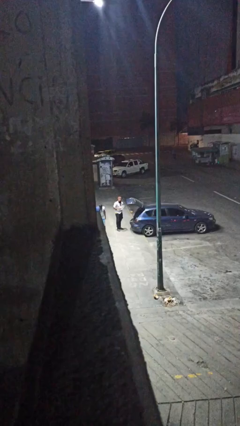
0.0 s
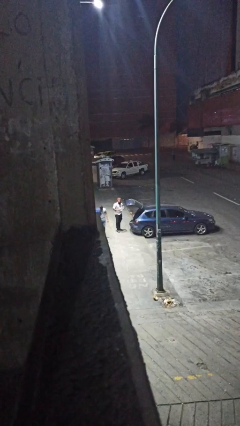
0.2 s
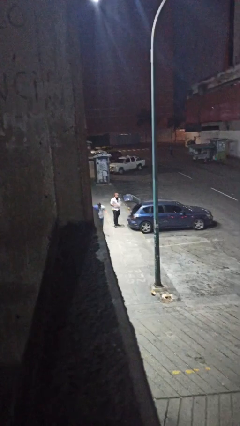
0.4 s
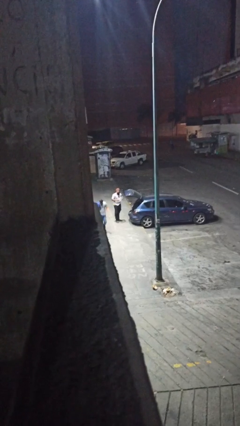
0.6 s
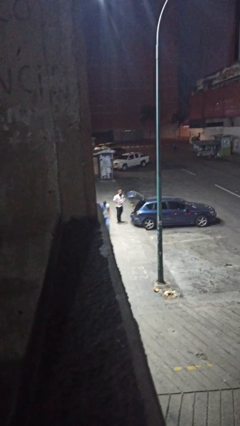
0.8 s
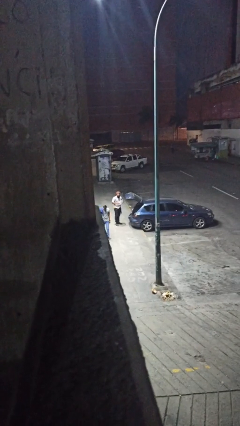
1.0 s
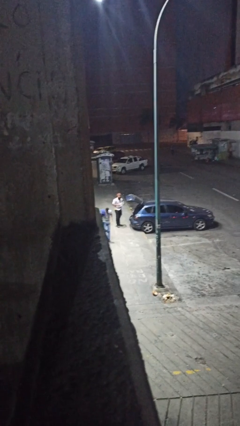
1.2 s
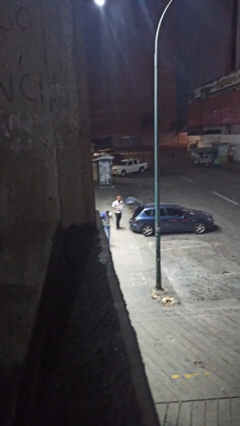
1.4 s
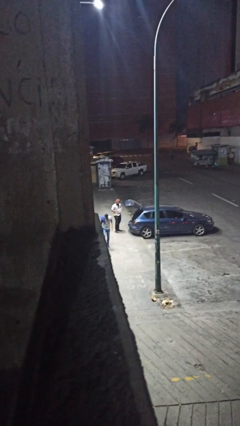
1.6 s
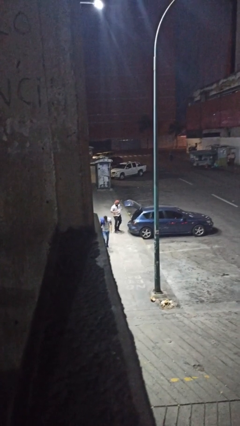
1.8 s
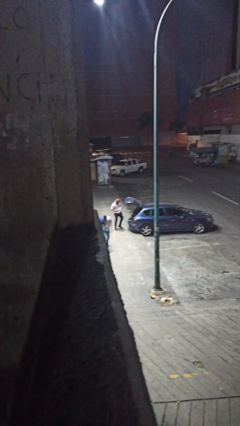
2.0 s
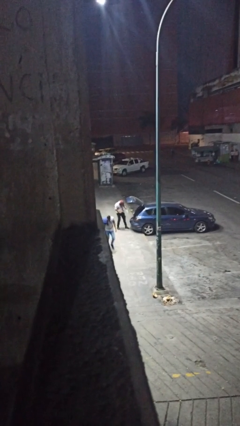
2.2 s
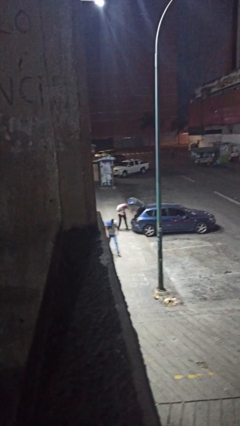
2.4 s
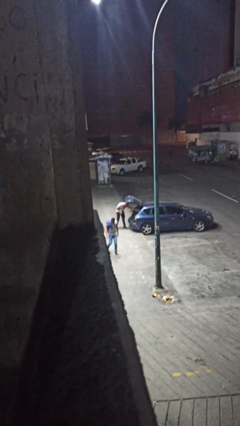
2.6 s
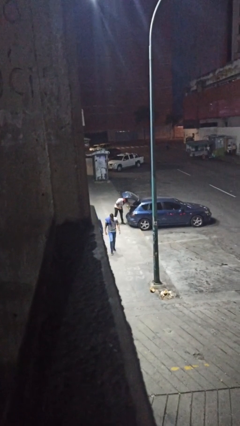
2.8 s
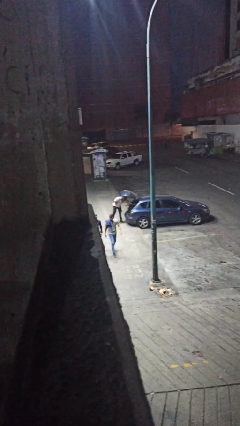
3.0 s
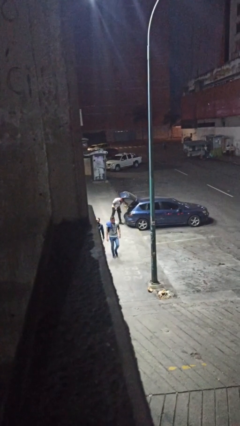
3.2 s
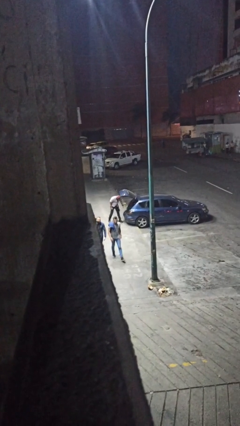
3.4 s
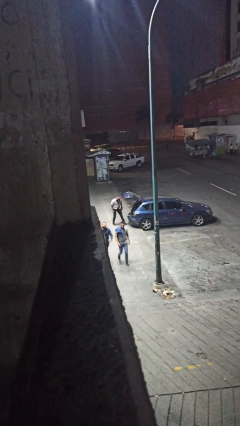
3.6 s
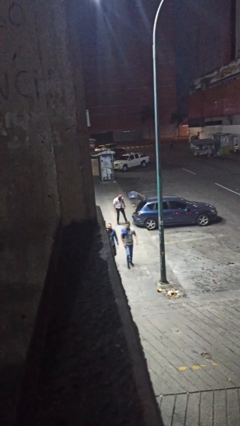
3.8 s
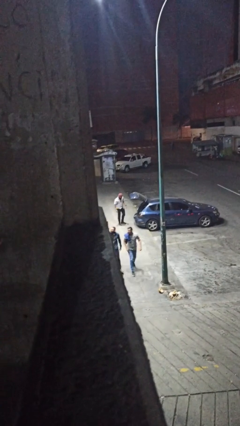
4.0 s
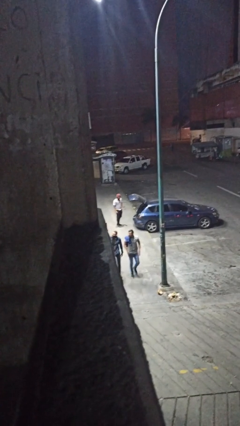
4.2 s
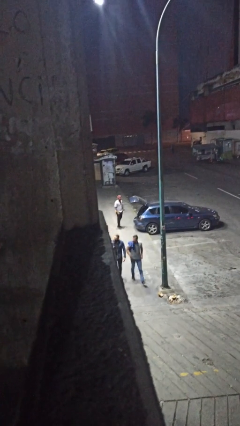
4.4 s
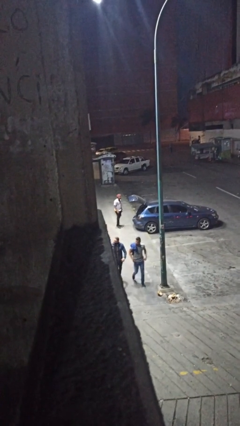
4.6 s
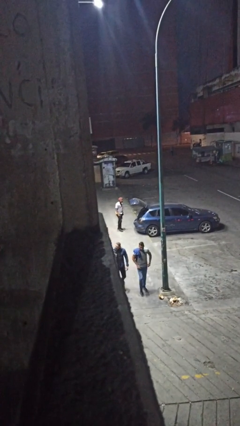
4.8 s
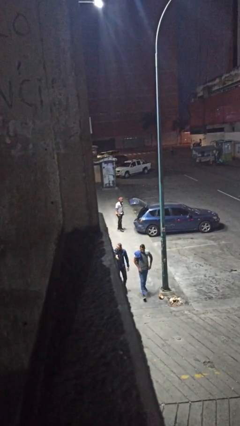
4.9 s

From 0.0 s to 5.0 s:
person loads car

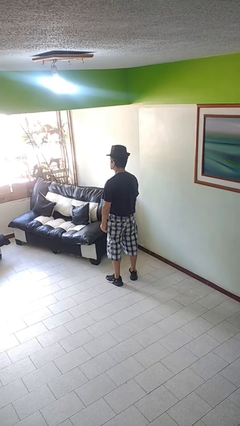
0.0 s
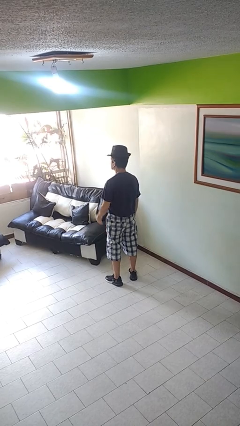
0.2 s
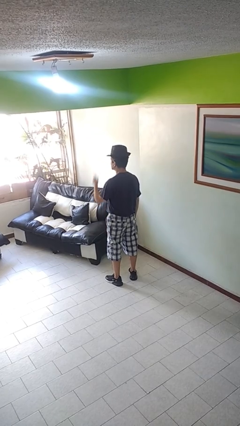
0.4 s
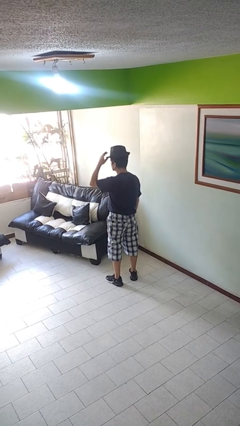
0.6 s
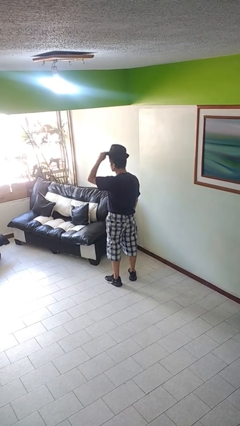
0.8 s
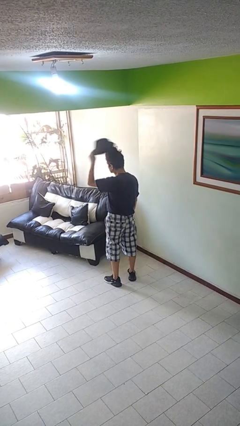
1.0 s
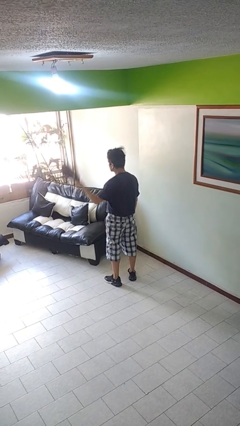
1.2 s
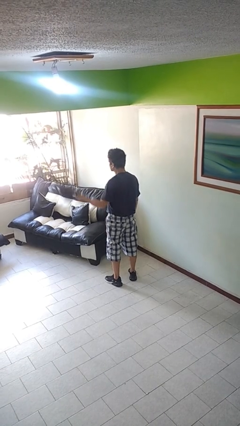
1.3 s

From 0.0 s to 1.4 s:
person takes off hat

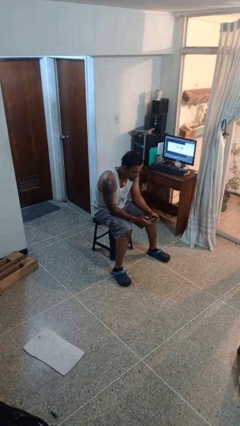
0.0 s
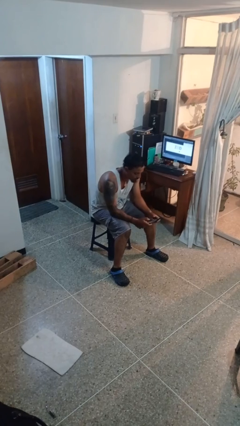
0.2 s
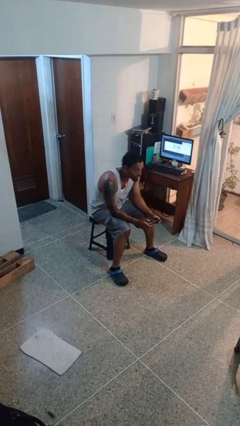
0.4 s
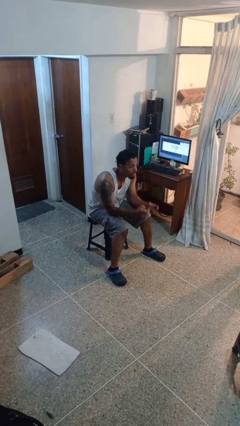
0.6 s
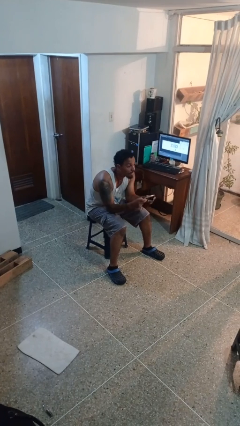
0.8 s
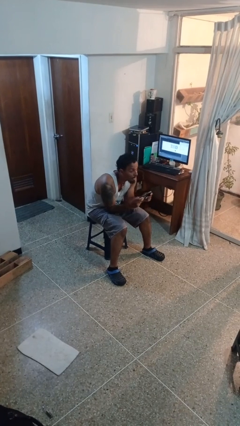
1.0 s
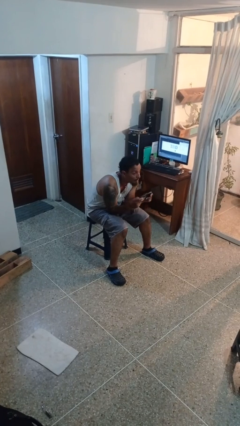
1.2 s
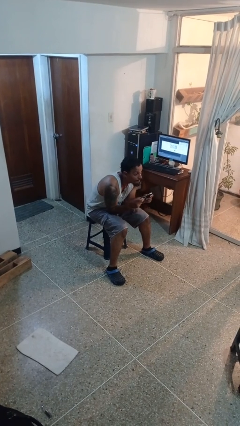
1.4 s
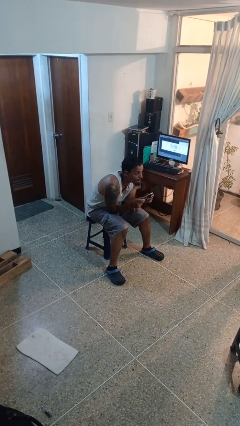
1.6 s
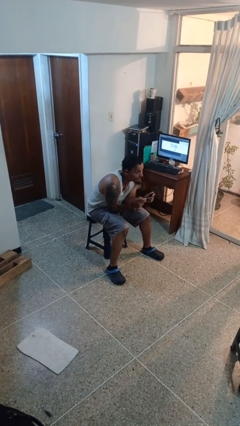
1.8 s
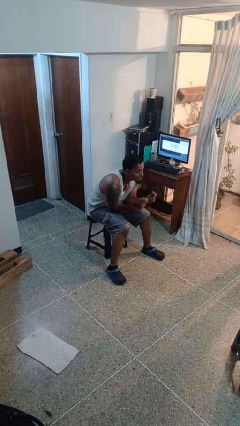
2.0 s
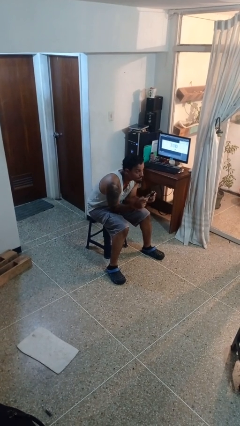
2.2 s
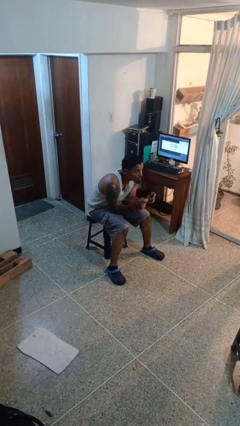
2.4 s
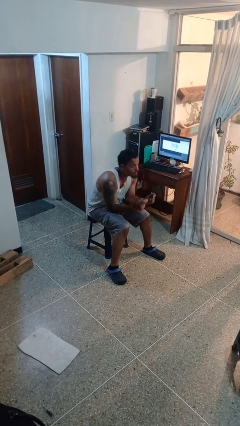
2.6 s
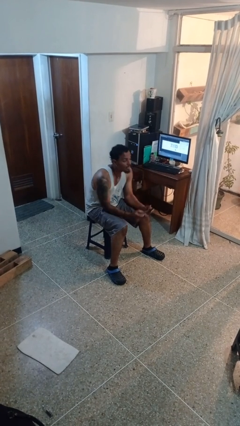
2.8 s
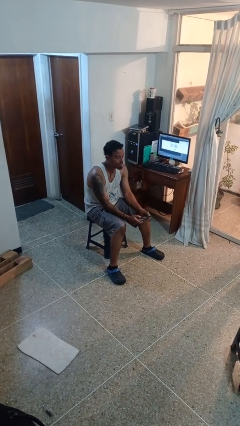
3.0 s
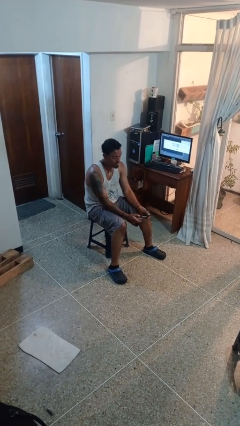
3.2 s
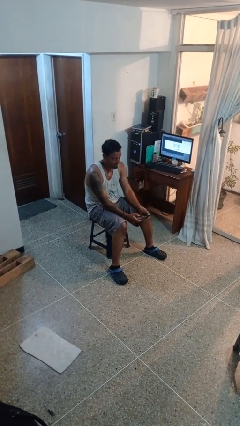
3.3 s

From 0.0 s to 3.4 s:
person interacts with handheld game

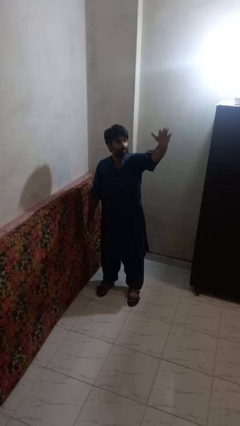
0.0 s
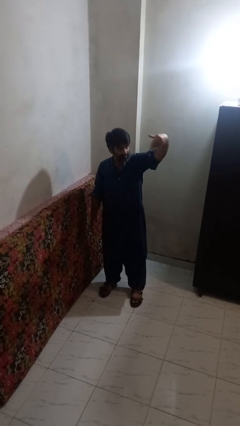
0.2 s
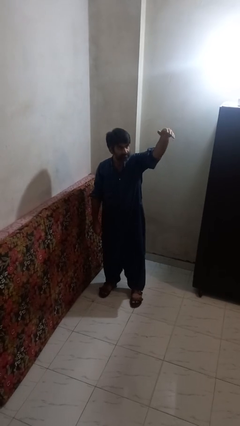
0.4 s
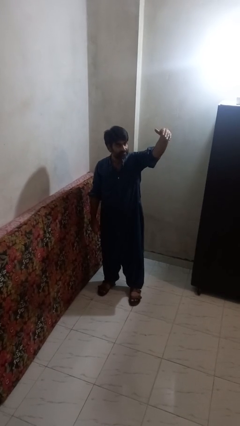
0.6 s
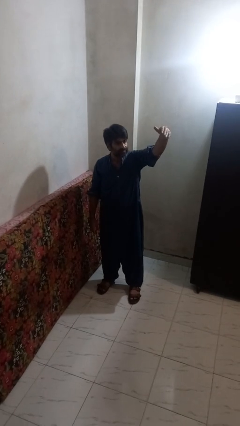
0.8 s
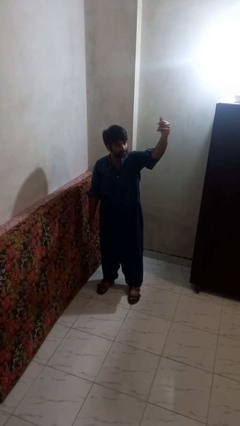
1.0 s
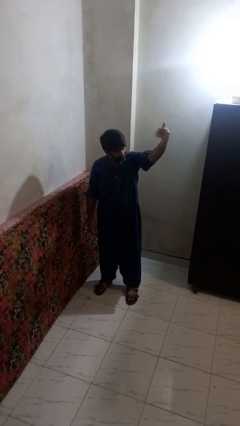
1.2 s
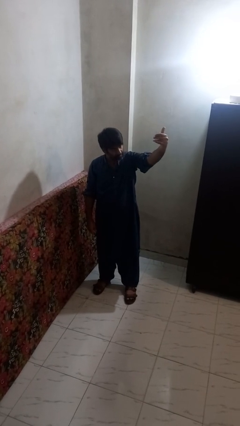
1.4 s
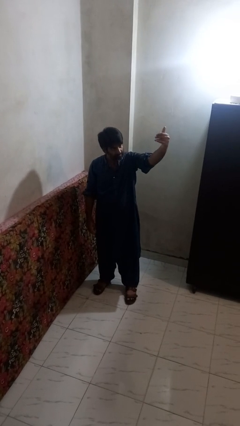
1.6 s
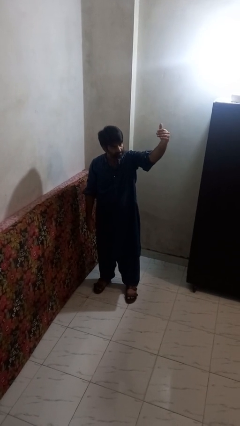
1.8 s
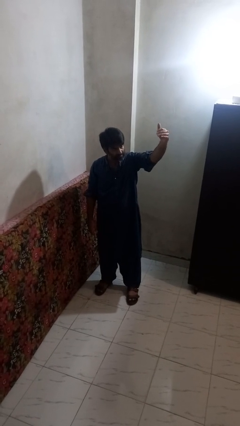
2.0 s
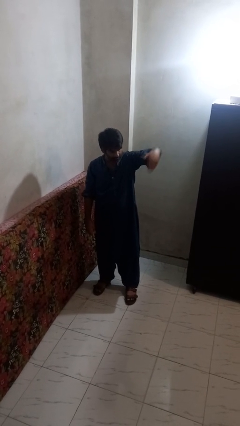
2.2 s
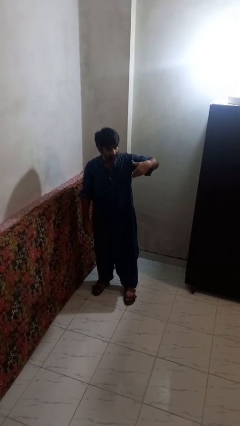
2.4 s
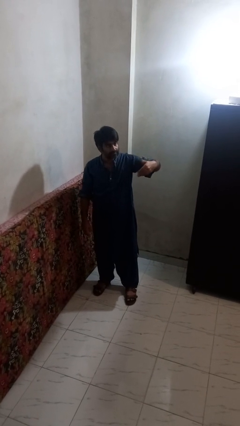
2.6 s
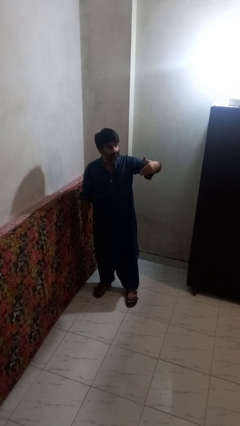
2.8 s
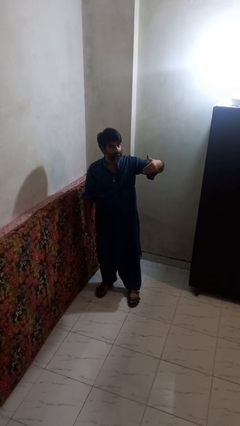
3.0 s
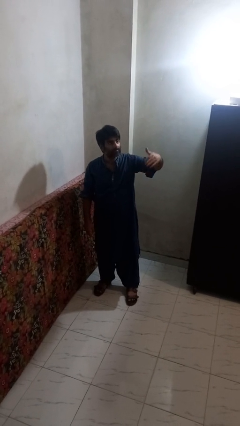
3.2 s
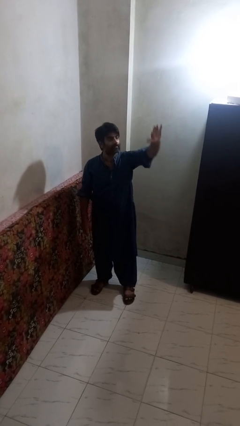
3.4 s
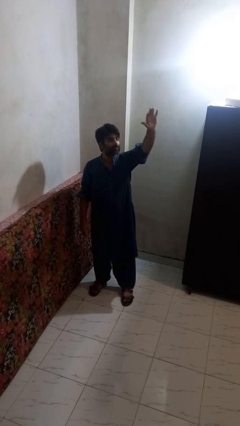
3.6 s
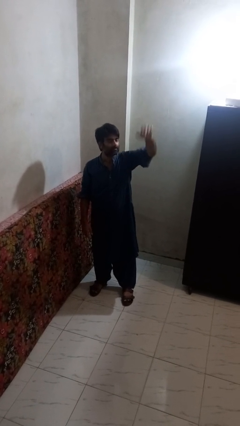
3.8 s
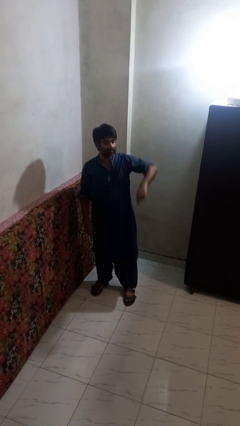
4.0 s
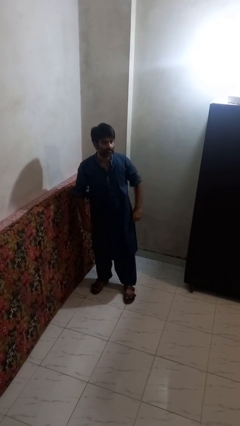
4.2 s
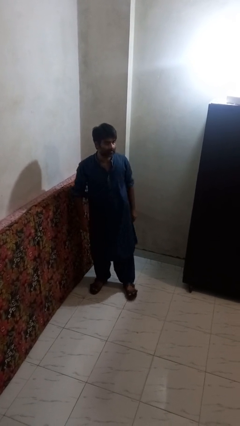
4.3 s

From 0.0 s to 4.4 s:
person gestures come here

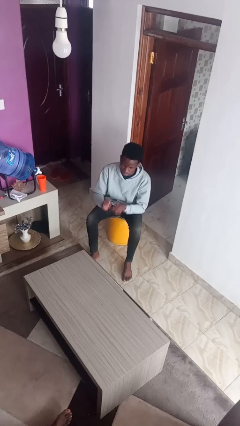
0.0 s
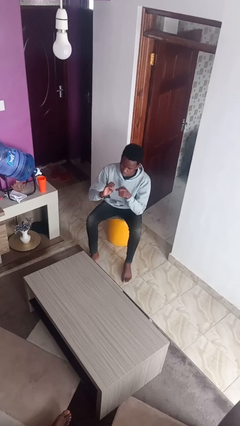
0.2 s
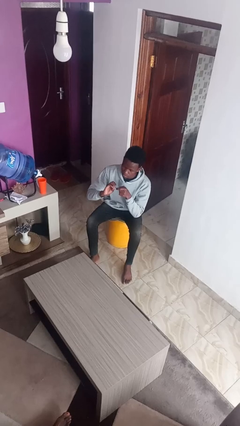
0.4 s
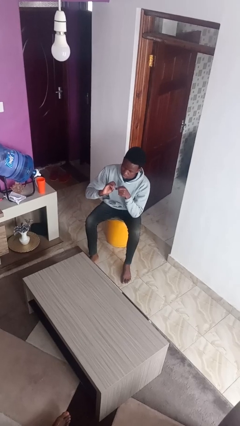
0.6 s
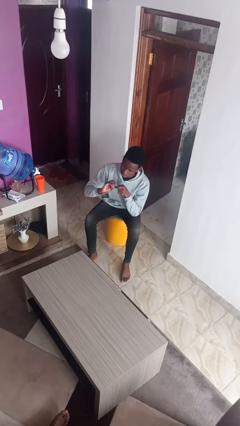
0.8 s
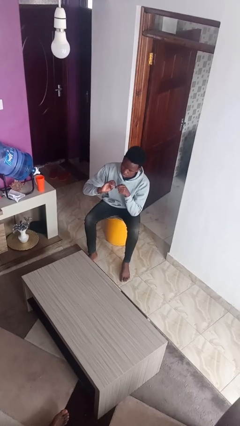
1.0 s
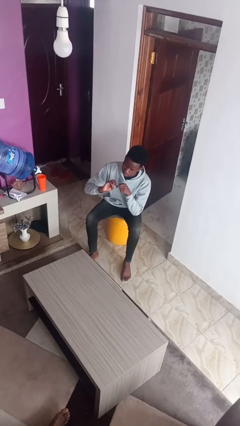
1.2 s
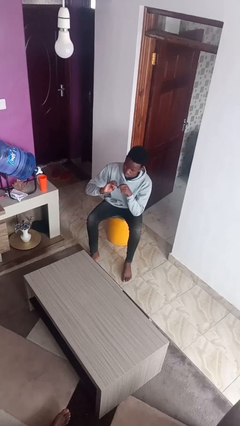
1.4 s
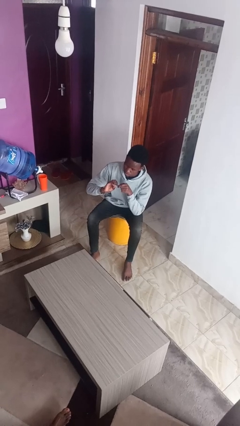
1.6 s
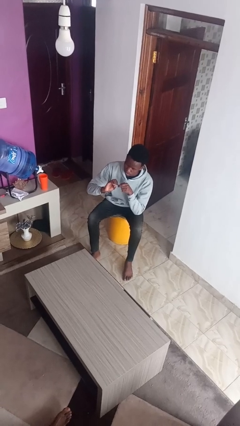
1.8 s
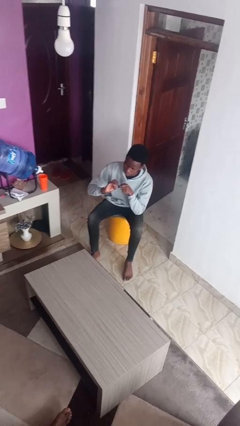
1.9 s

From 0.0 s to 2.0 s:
person files fingernails

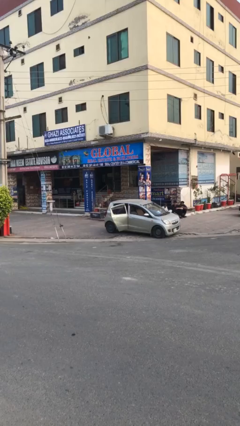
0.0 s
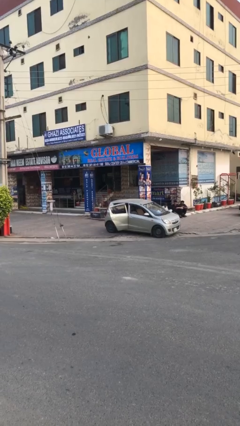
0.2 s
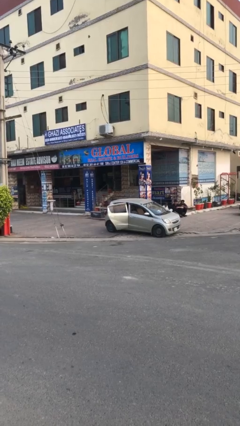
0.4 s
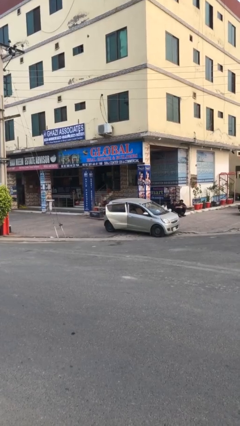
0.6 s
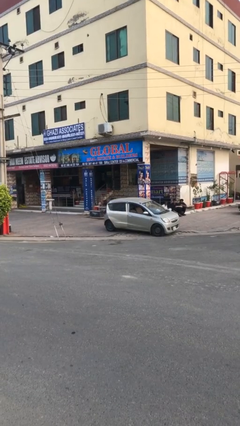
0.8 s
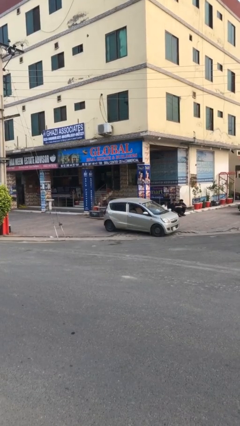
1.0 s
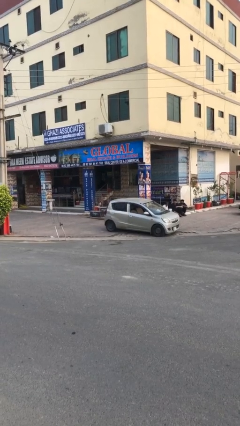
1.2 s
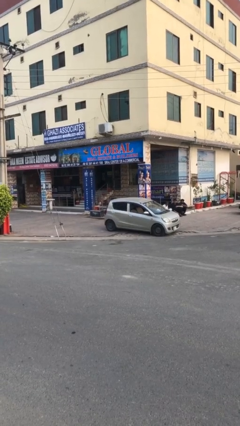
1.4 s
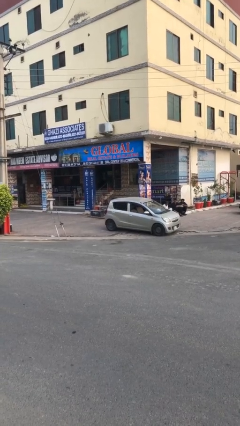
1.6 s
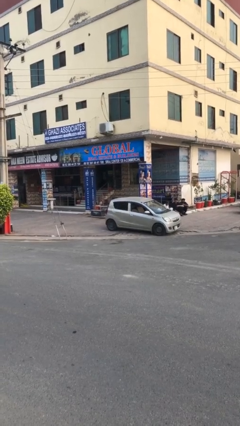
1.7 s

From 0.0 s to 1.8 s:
person closes car door
